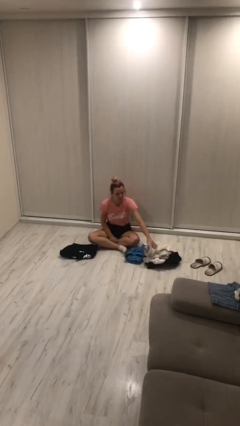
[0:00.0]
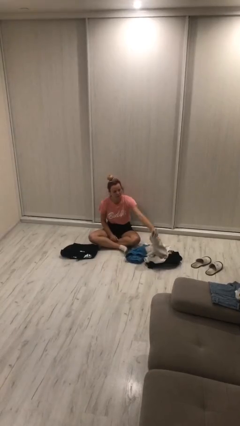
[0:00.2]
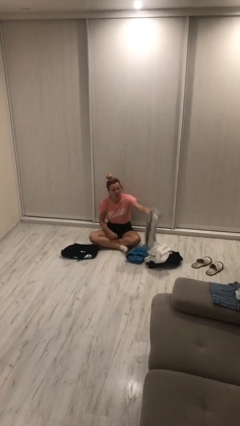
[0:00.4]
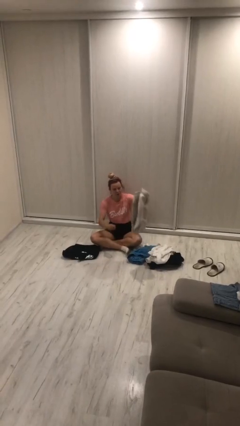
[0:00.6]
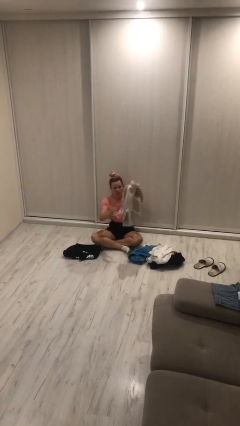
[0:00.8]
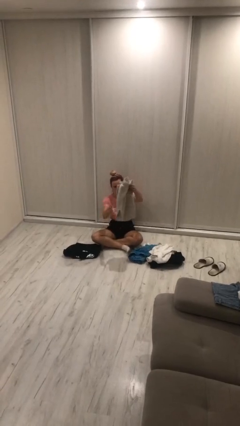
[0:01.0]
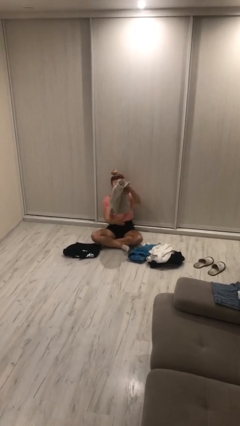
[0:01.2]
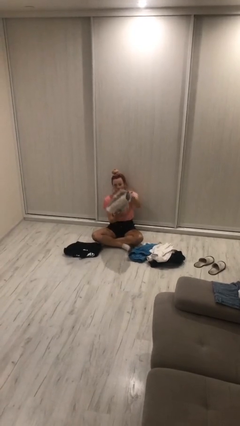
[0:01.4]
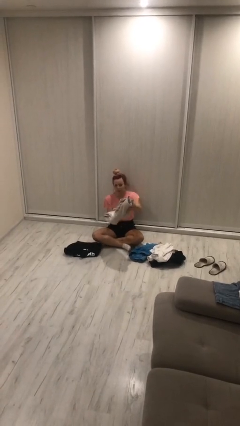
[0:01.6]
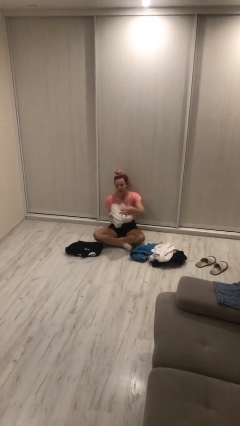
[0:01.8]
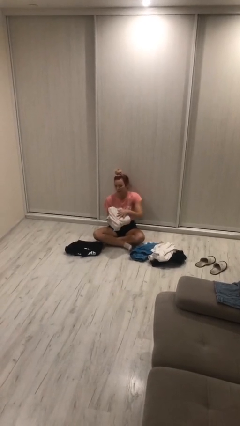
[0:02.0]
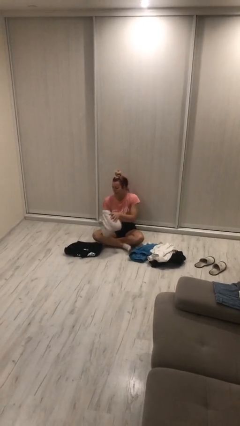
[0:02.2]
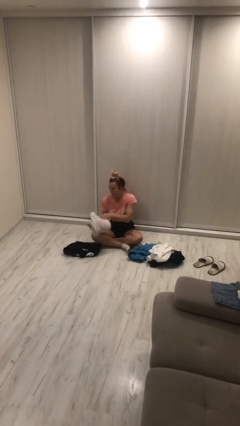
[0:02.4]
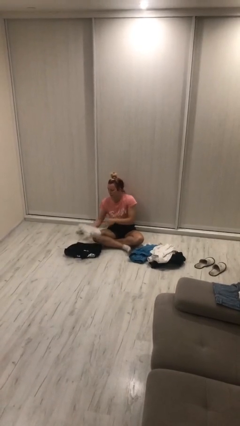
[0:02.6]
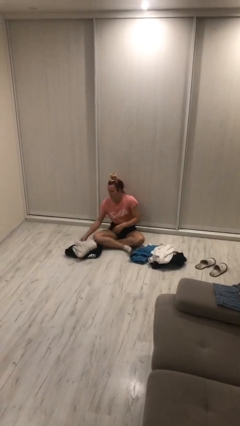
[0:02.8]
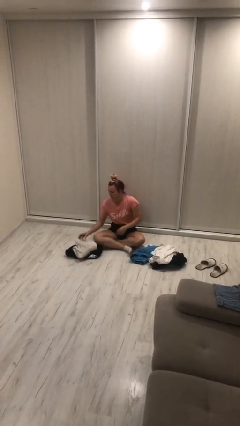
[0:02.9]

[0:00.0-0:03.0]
person folds pants

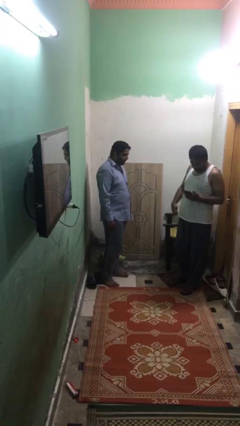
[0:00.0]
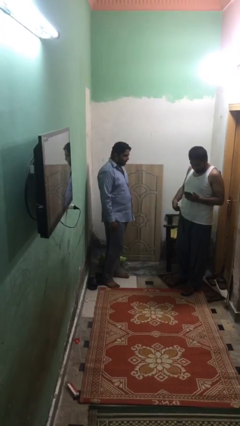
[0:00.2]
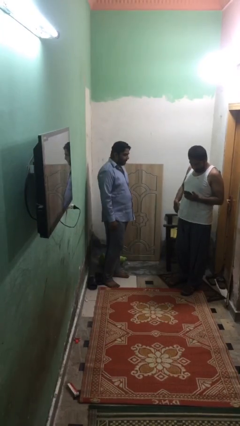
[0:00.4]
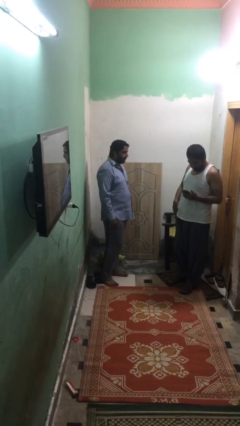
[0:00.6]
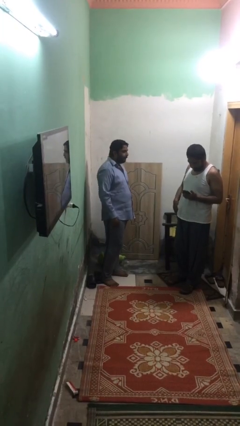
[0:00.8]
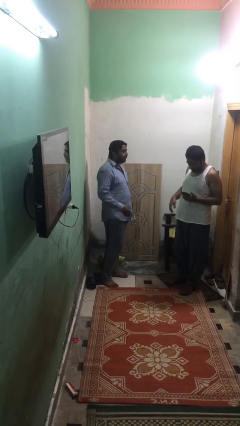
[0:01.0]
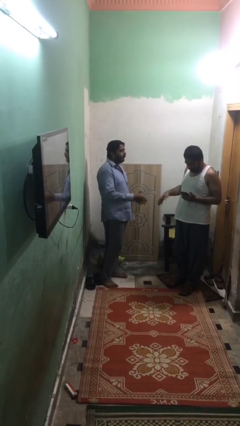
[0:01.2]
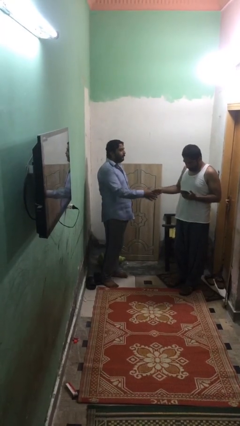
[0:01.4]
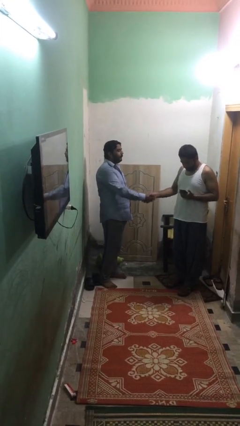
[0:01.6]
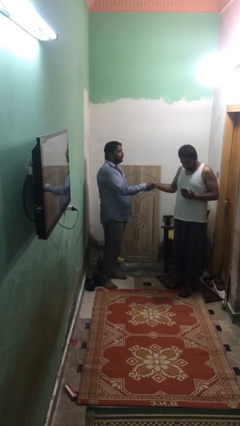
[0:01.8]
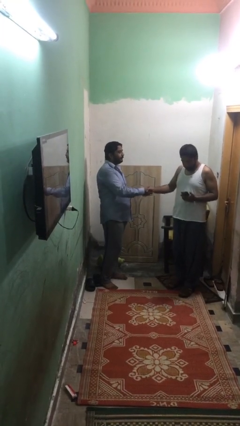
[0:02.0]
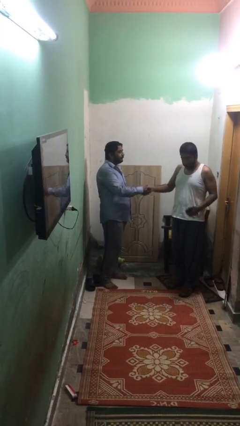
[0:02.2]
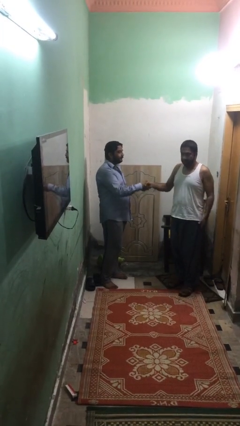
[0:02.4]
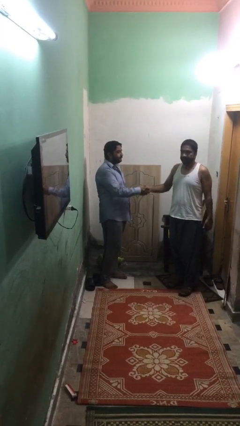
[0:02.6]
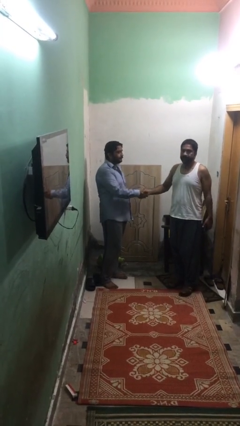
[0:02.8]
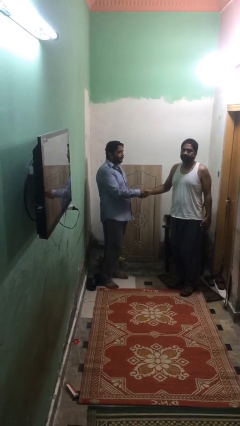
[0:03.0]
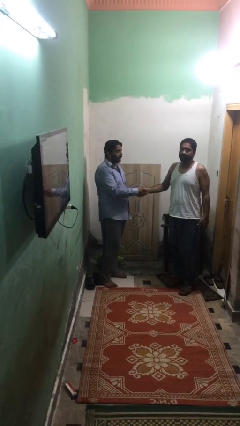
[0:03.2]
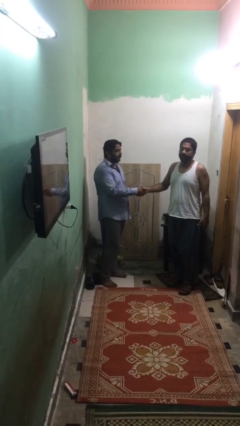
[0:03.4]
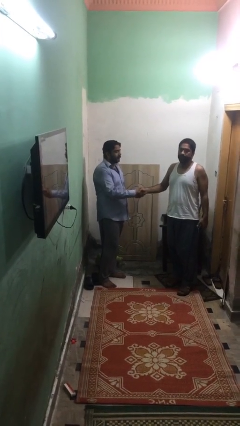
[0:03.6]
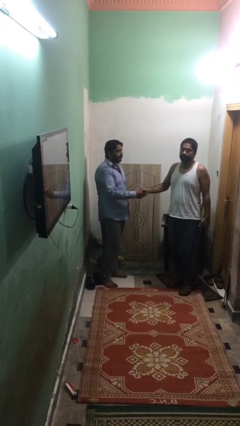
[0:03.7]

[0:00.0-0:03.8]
person shakes hand

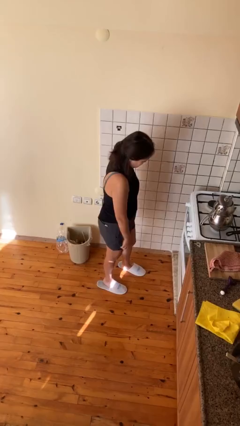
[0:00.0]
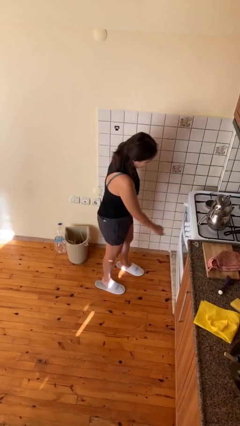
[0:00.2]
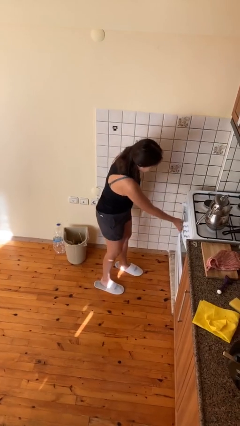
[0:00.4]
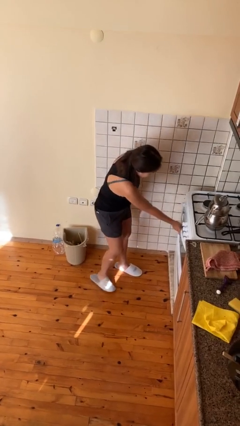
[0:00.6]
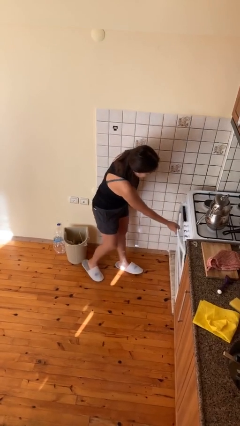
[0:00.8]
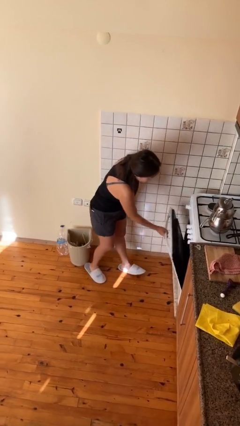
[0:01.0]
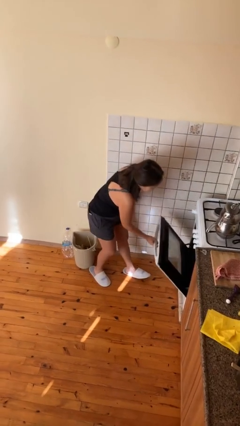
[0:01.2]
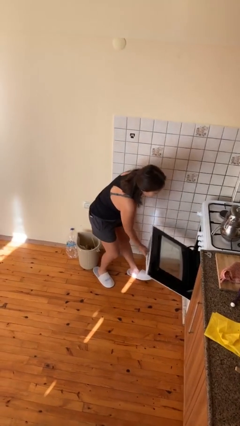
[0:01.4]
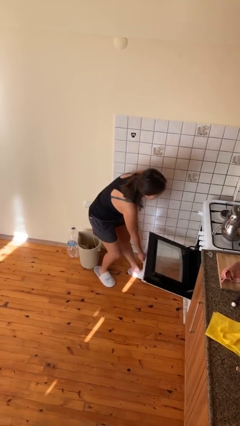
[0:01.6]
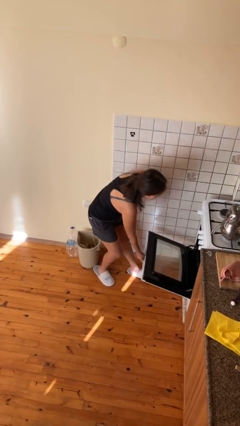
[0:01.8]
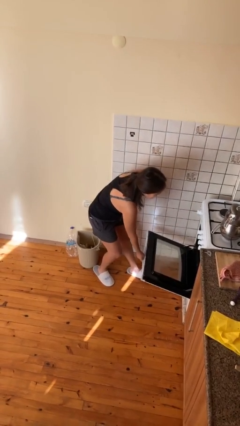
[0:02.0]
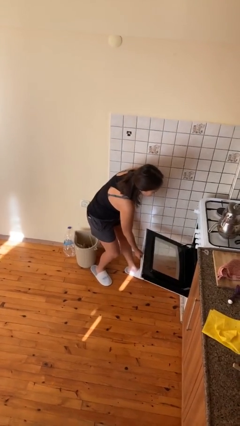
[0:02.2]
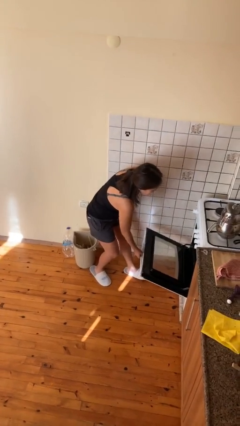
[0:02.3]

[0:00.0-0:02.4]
person opens oven door

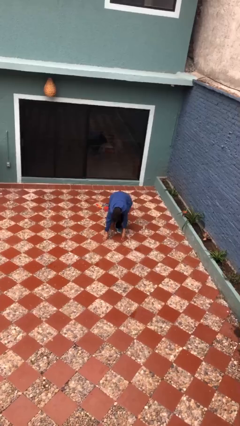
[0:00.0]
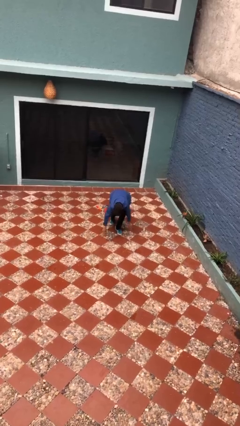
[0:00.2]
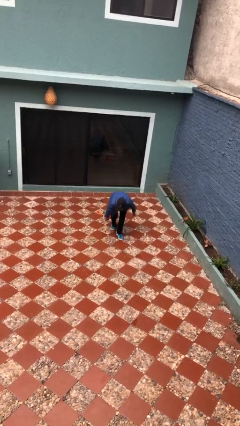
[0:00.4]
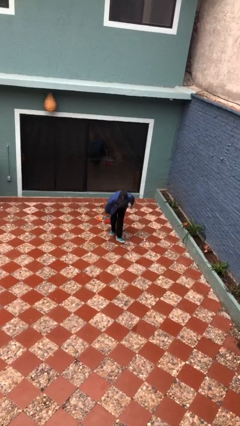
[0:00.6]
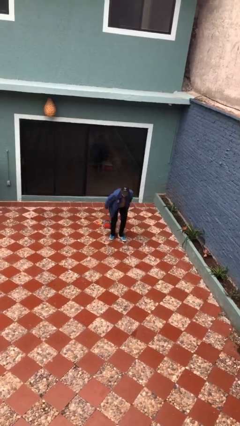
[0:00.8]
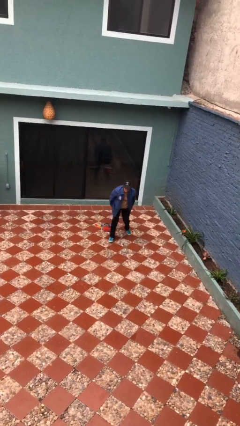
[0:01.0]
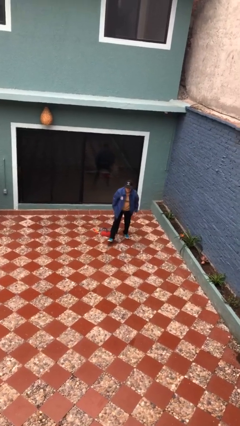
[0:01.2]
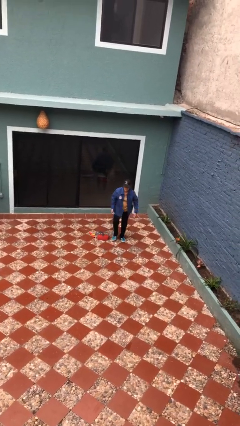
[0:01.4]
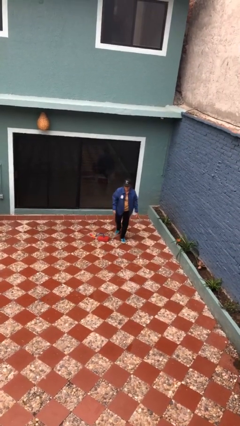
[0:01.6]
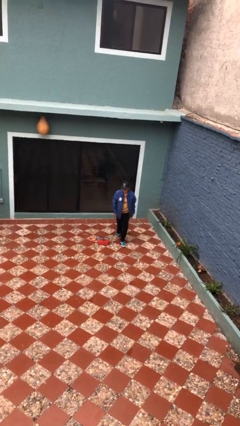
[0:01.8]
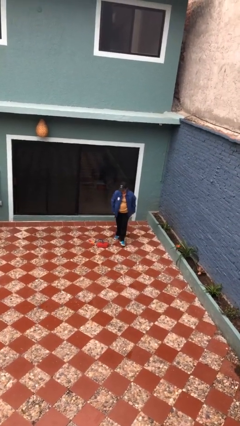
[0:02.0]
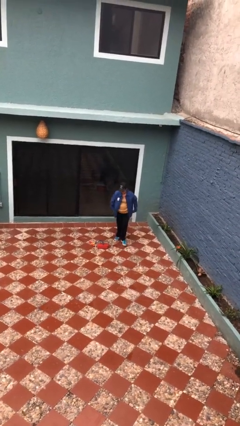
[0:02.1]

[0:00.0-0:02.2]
person stands up from floor

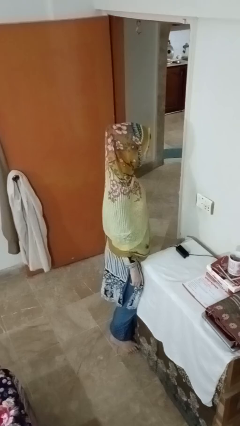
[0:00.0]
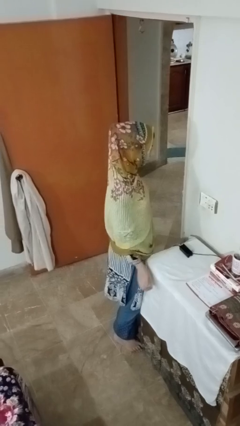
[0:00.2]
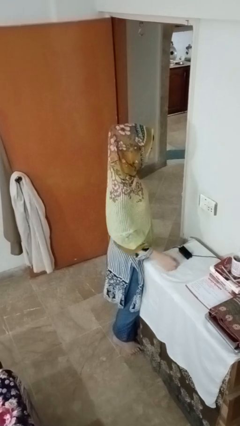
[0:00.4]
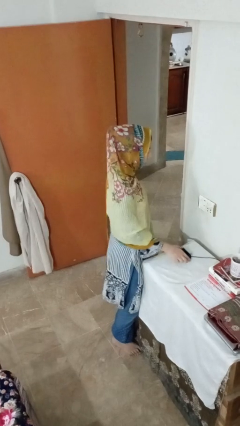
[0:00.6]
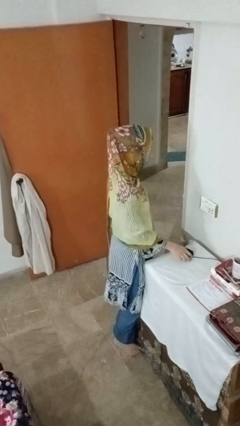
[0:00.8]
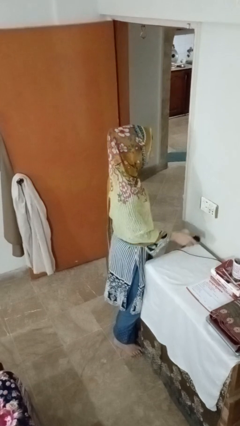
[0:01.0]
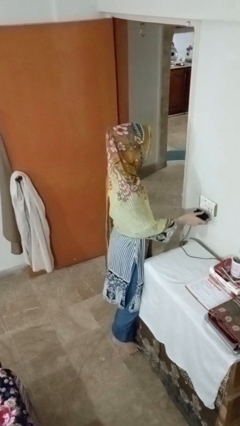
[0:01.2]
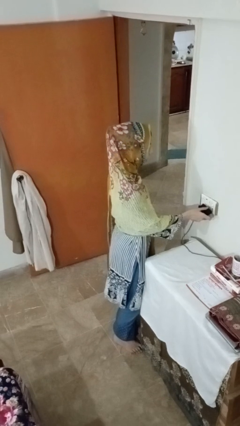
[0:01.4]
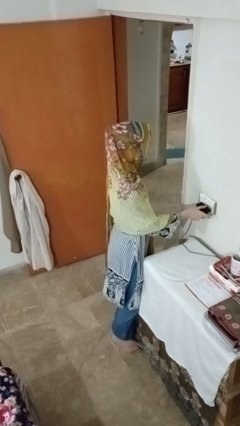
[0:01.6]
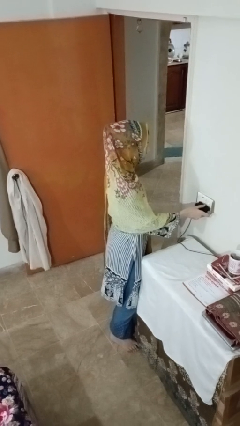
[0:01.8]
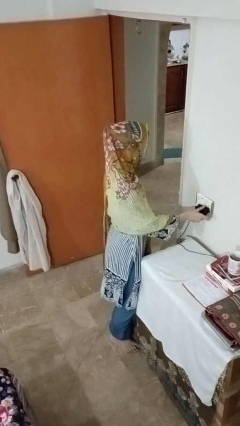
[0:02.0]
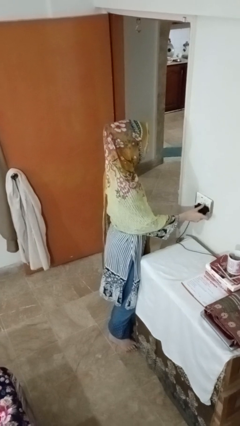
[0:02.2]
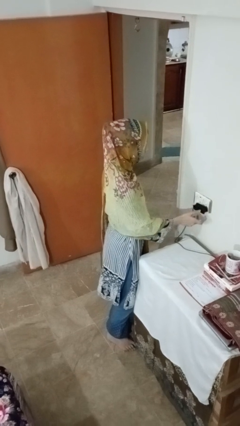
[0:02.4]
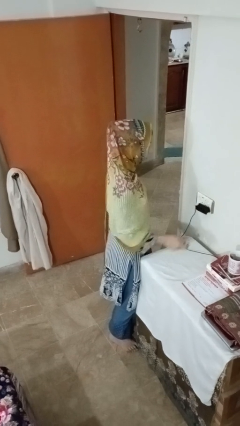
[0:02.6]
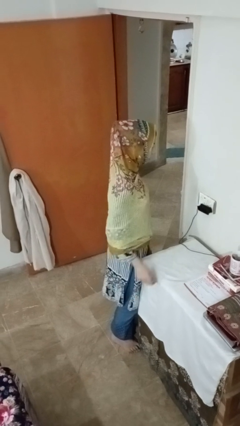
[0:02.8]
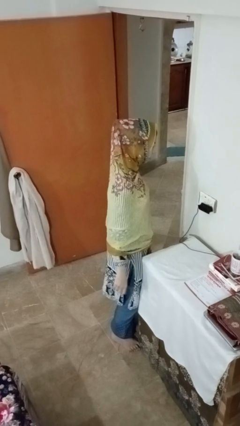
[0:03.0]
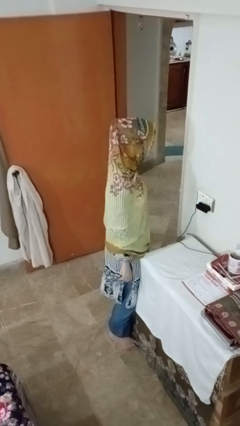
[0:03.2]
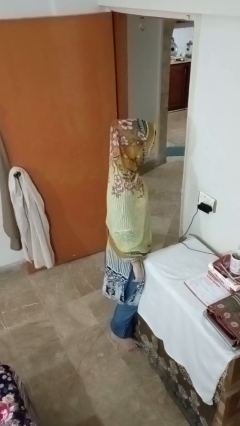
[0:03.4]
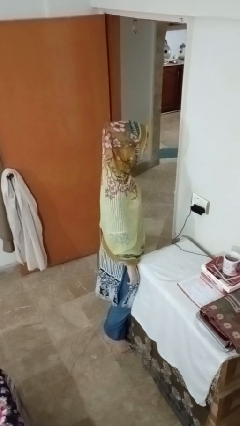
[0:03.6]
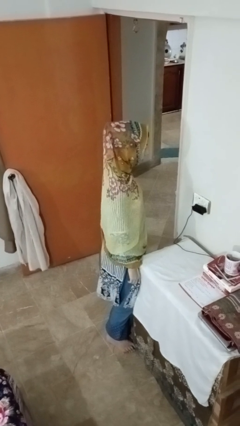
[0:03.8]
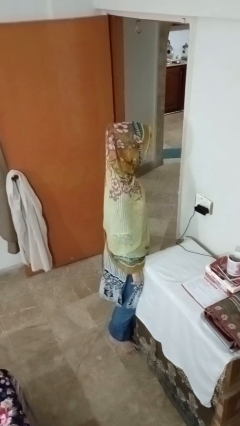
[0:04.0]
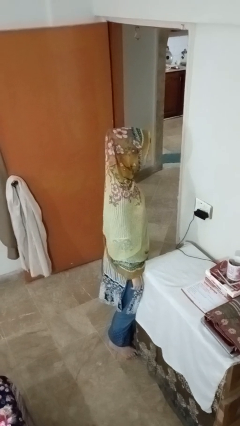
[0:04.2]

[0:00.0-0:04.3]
person plugs into electrical socket

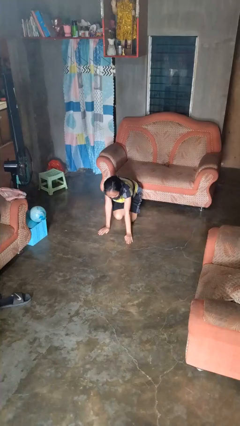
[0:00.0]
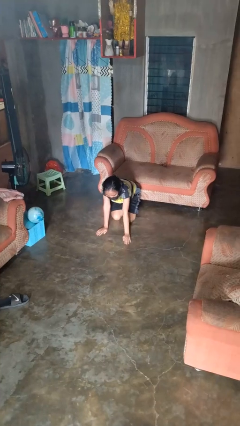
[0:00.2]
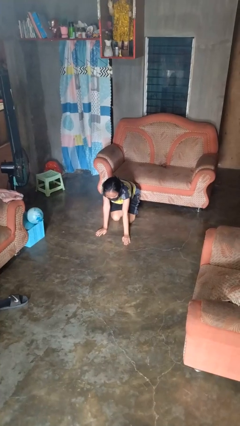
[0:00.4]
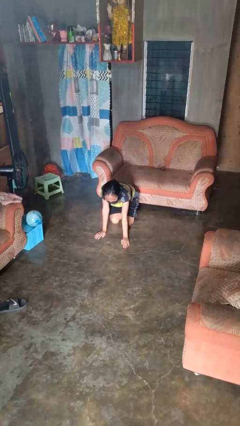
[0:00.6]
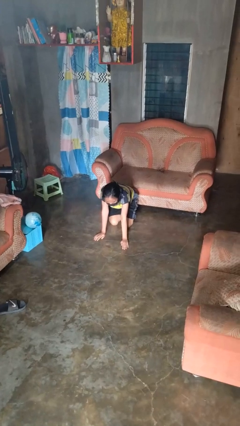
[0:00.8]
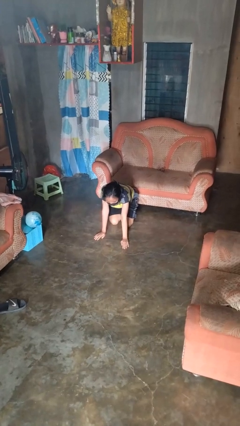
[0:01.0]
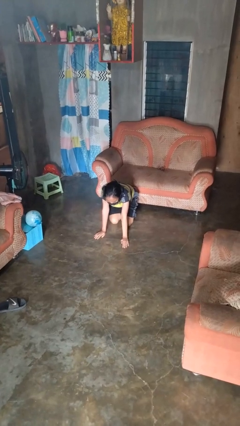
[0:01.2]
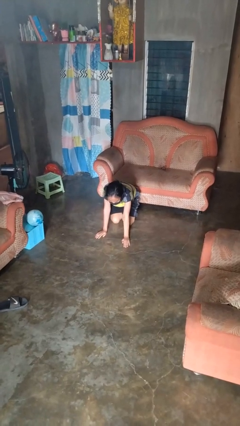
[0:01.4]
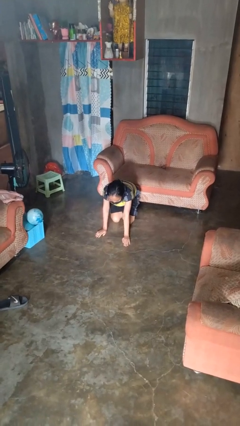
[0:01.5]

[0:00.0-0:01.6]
person crawls
